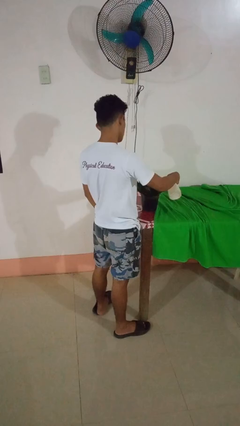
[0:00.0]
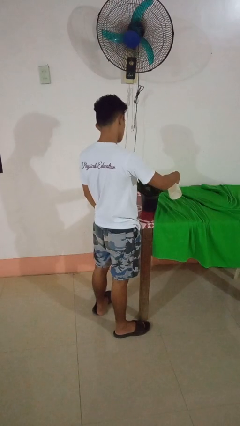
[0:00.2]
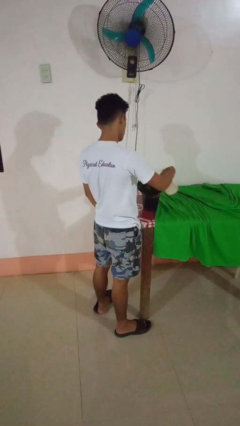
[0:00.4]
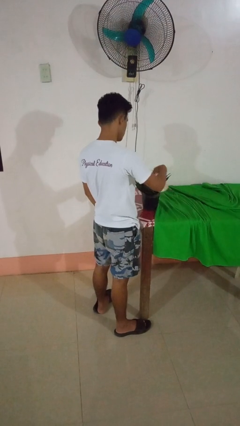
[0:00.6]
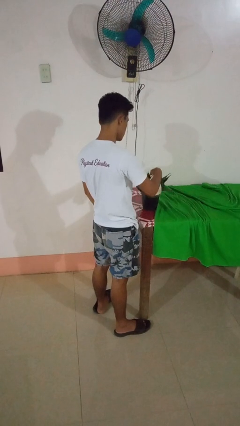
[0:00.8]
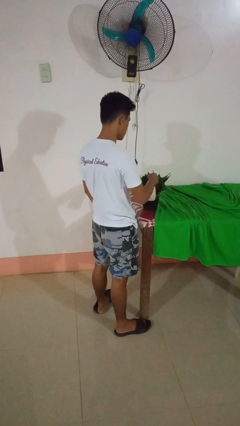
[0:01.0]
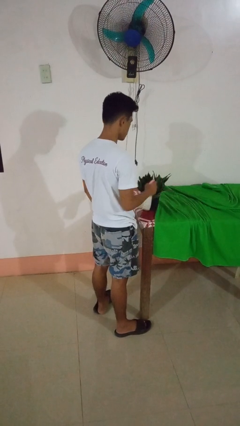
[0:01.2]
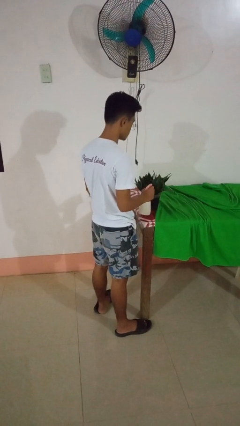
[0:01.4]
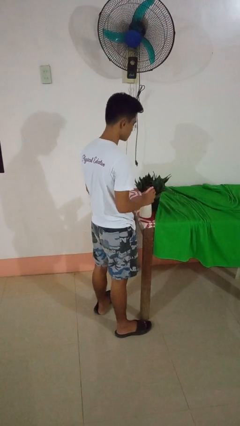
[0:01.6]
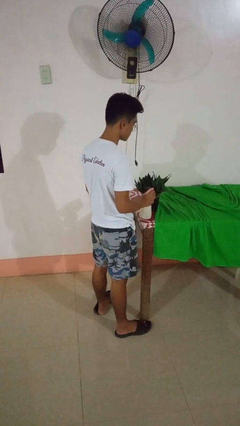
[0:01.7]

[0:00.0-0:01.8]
person waters houseplant

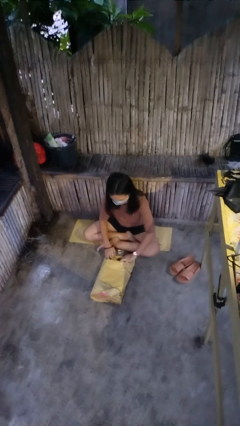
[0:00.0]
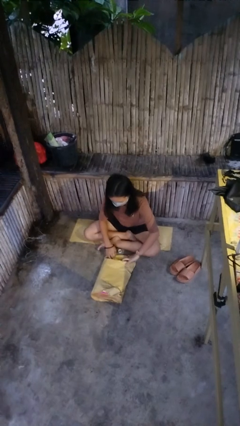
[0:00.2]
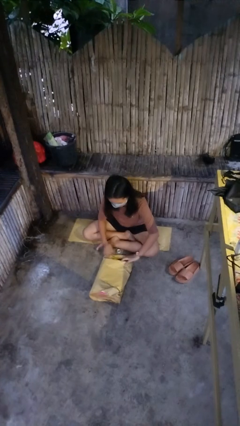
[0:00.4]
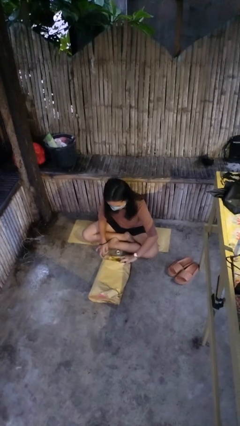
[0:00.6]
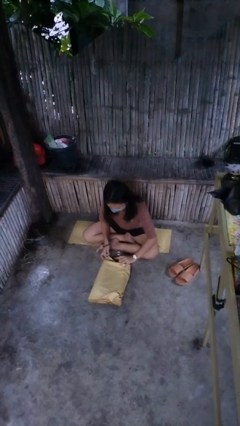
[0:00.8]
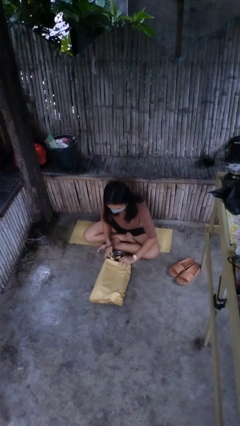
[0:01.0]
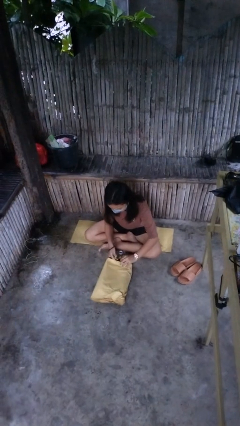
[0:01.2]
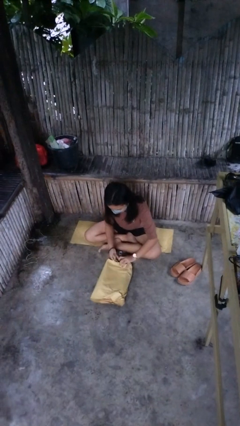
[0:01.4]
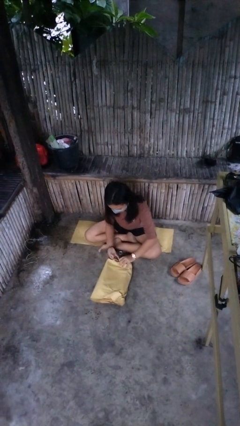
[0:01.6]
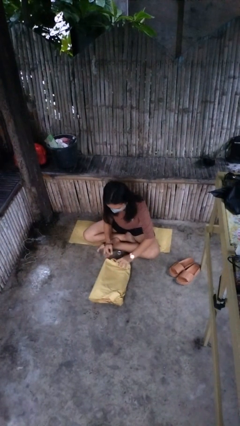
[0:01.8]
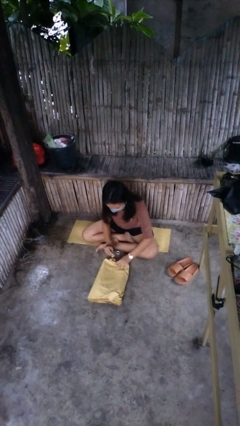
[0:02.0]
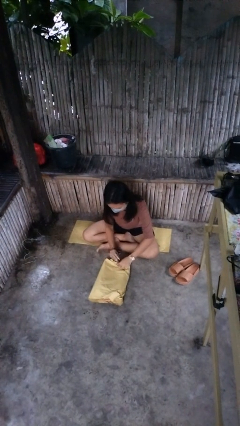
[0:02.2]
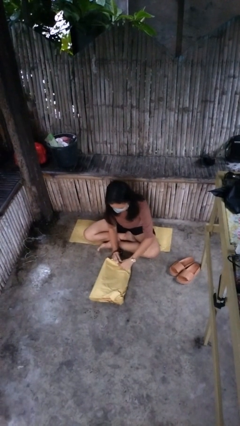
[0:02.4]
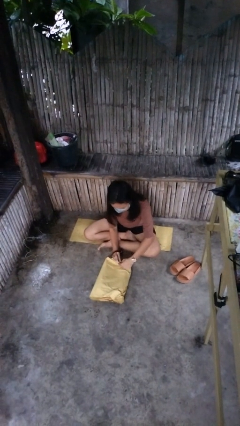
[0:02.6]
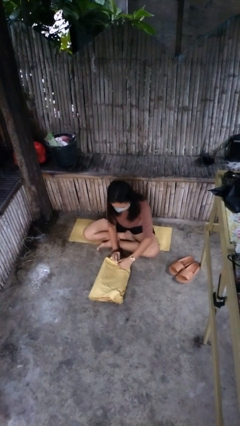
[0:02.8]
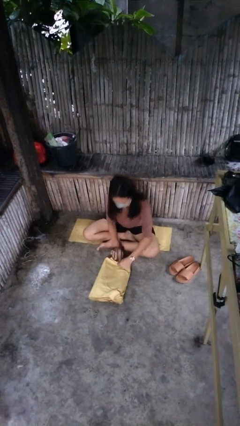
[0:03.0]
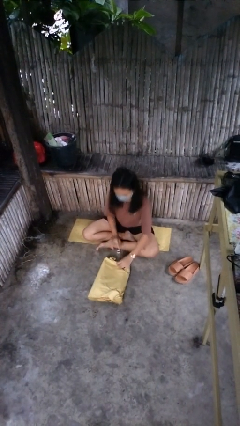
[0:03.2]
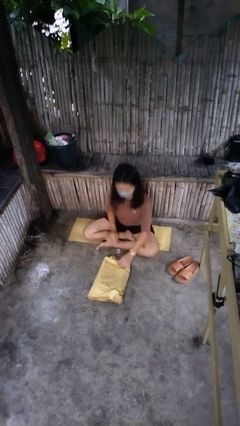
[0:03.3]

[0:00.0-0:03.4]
person wraps box

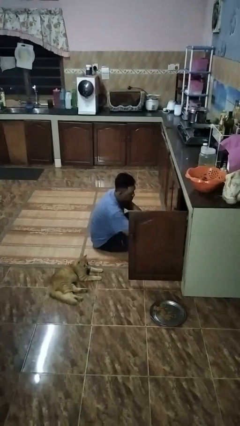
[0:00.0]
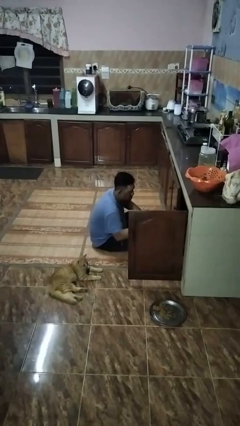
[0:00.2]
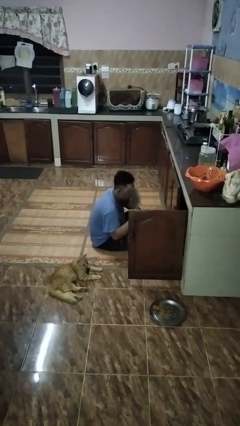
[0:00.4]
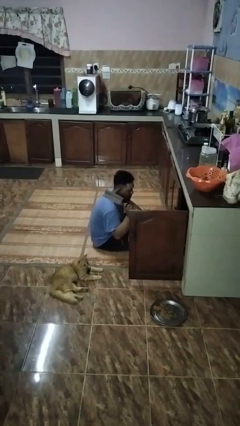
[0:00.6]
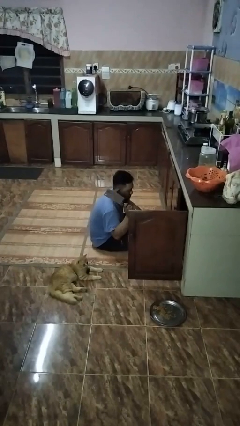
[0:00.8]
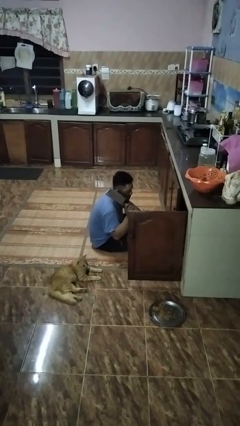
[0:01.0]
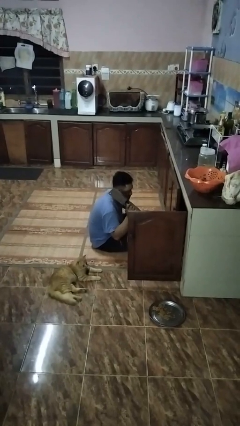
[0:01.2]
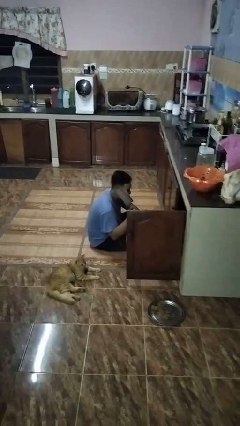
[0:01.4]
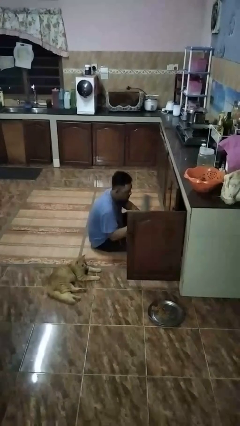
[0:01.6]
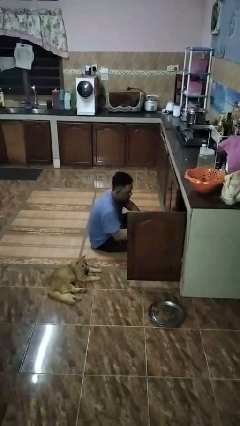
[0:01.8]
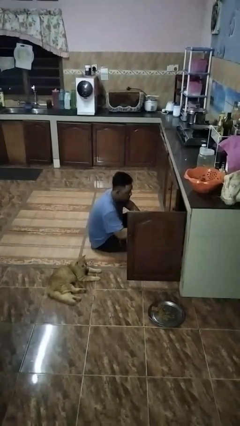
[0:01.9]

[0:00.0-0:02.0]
person takes object from kitchen drawer

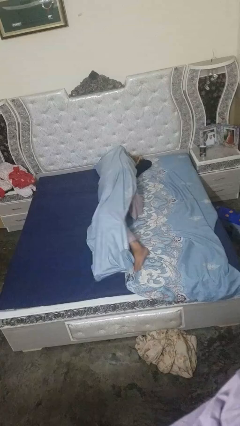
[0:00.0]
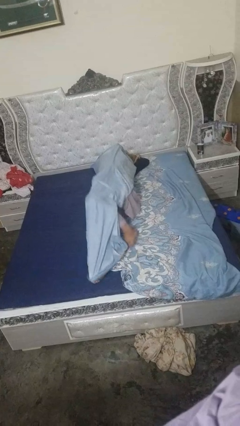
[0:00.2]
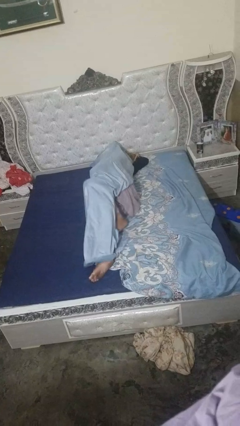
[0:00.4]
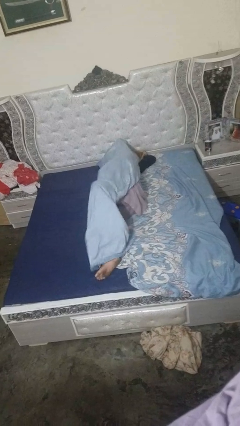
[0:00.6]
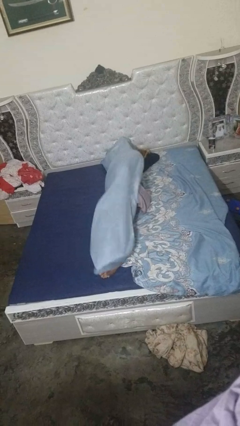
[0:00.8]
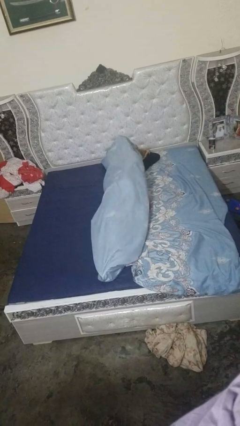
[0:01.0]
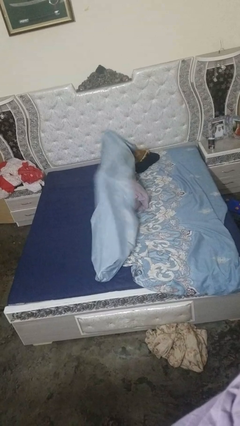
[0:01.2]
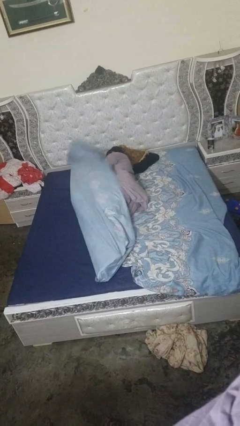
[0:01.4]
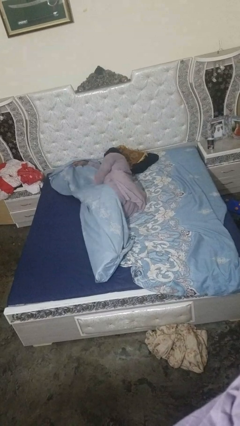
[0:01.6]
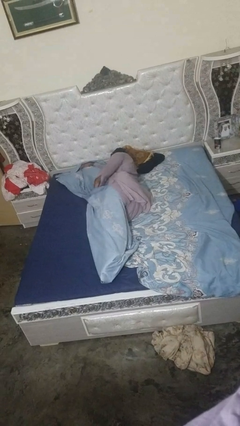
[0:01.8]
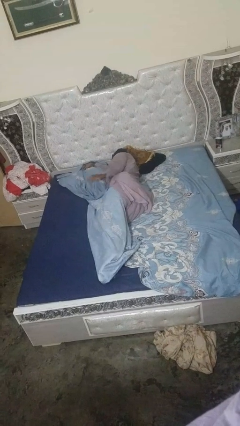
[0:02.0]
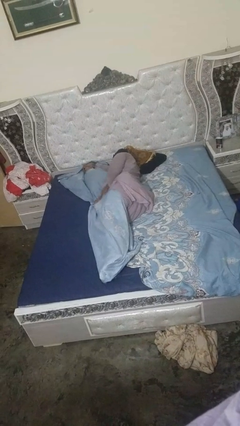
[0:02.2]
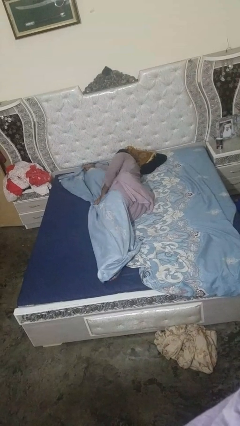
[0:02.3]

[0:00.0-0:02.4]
person uncovers with bedsheets

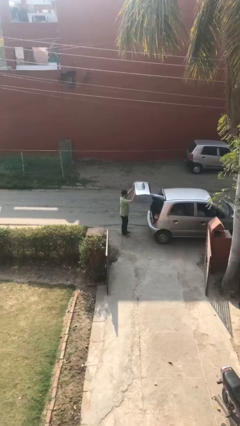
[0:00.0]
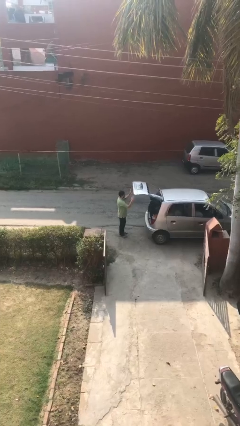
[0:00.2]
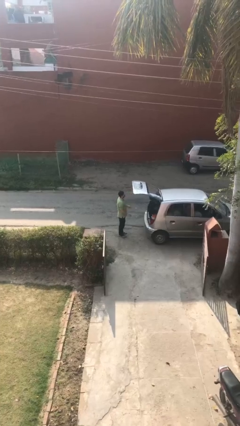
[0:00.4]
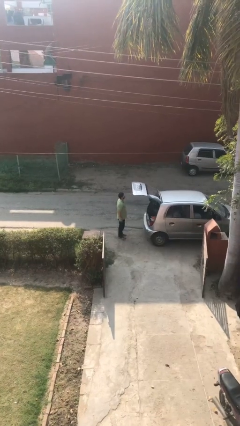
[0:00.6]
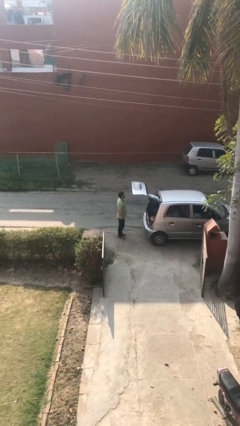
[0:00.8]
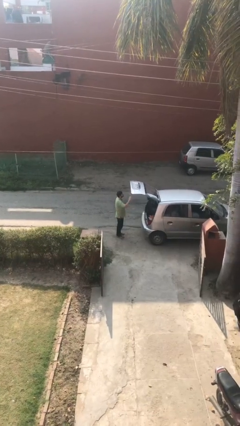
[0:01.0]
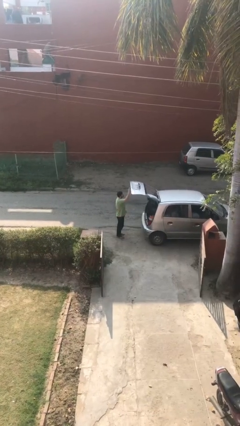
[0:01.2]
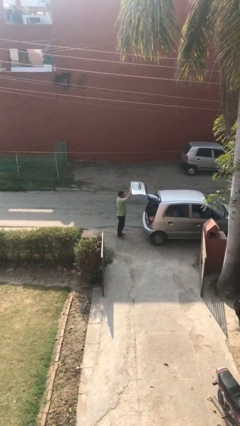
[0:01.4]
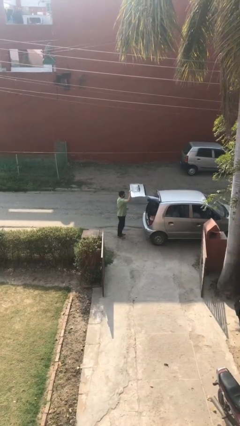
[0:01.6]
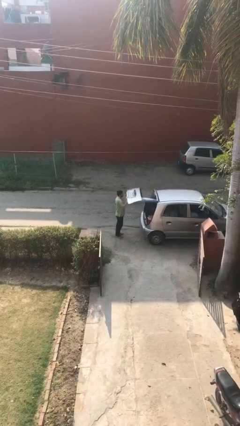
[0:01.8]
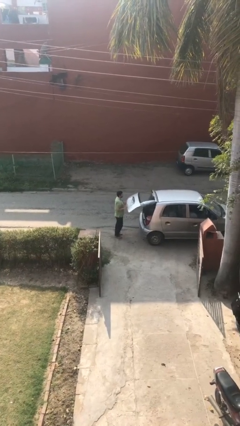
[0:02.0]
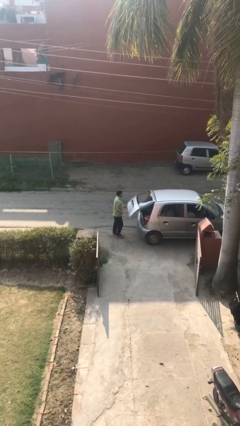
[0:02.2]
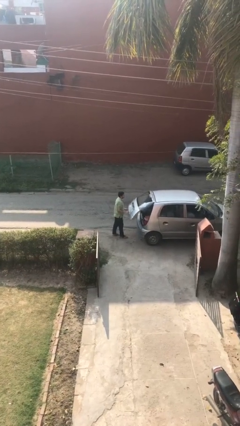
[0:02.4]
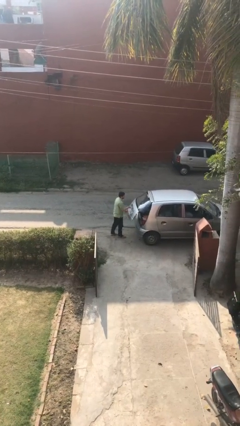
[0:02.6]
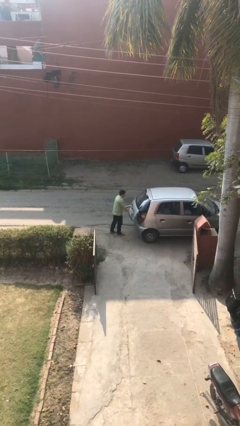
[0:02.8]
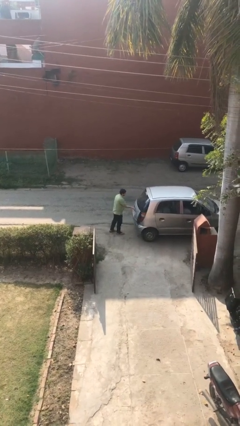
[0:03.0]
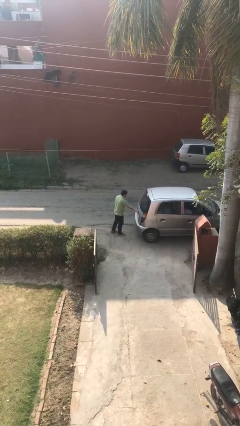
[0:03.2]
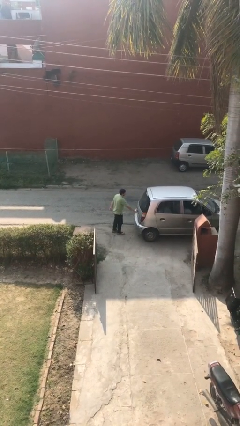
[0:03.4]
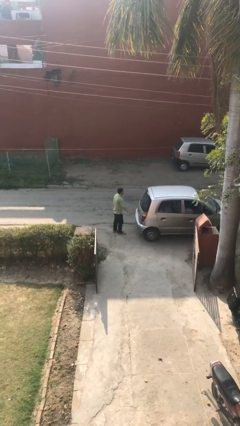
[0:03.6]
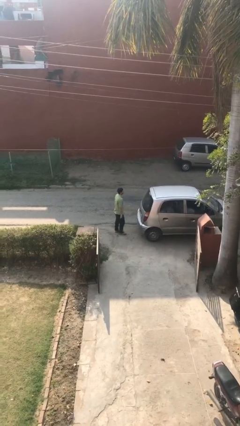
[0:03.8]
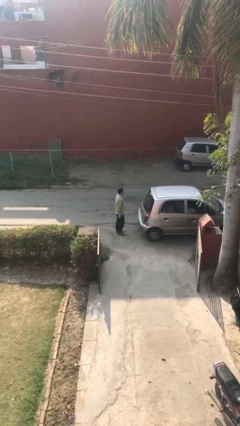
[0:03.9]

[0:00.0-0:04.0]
person closes car trunk

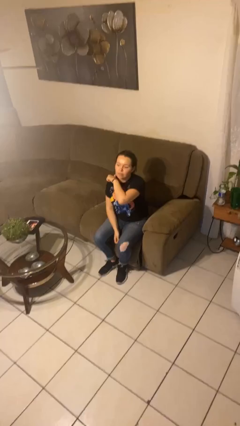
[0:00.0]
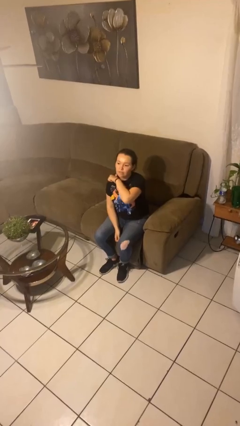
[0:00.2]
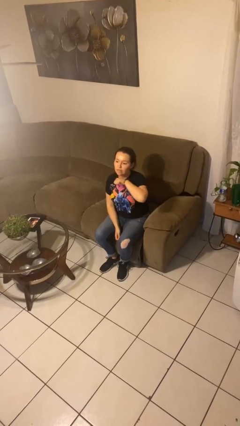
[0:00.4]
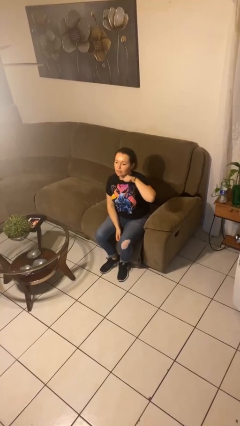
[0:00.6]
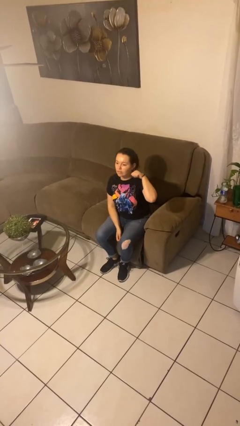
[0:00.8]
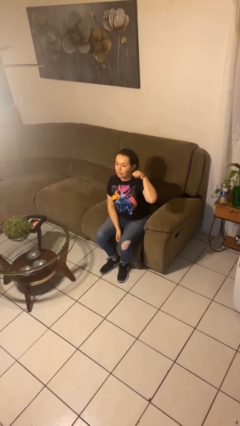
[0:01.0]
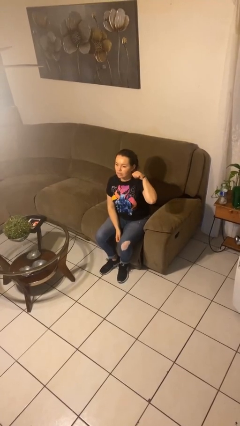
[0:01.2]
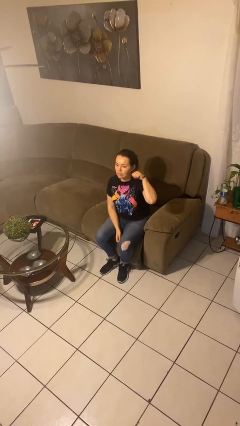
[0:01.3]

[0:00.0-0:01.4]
person gestures cut

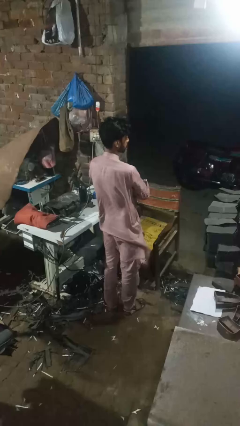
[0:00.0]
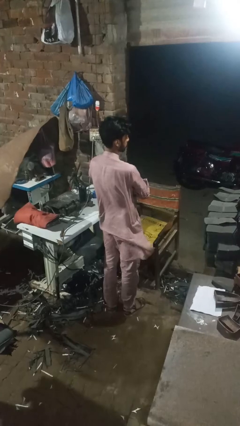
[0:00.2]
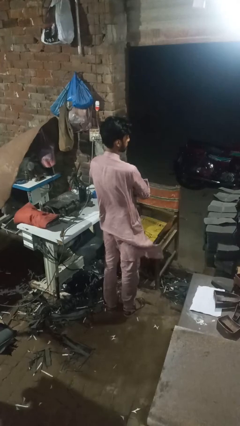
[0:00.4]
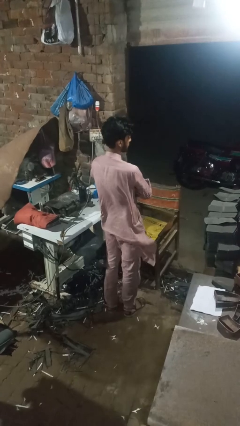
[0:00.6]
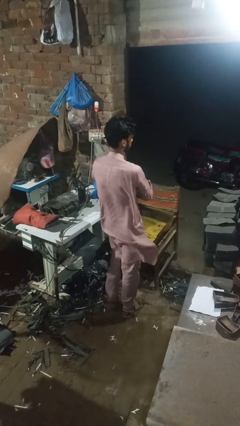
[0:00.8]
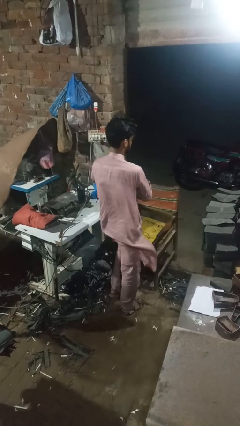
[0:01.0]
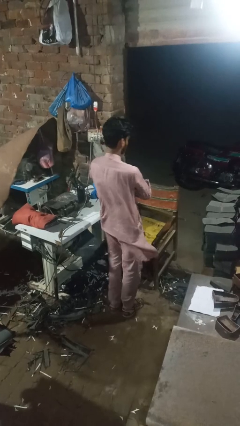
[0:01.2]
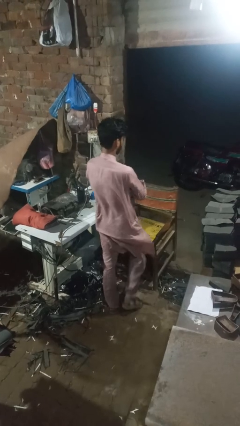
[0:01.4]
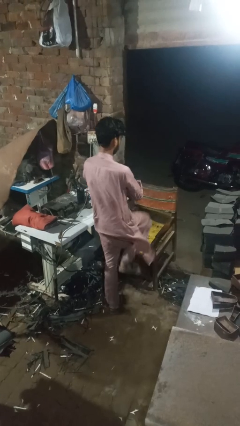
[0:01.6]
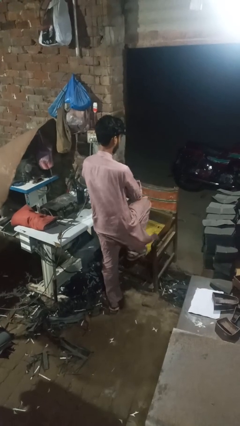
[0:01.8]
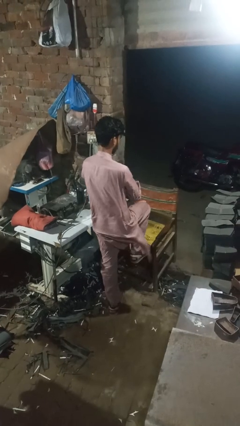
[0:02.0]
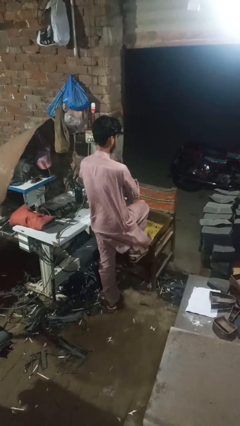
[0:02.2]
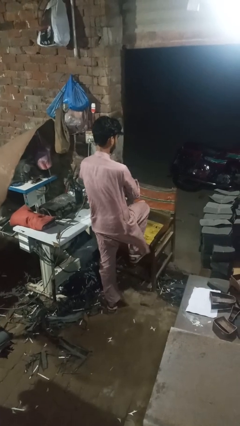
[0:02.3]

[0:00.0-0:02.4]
person stubs toe
